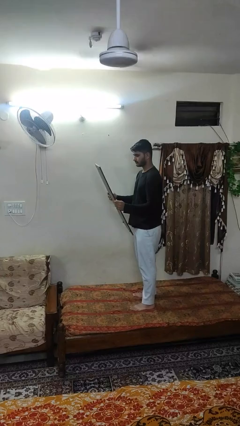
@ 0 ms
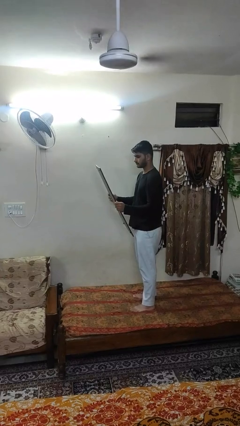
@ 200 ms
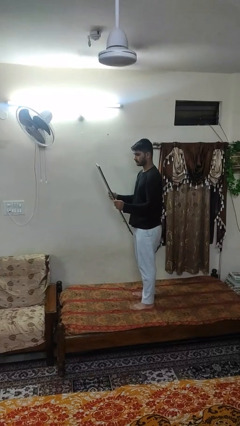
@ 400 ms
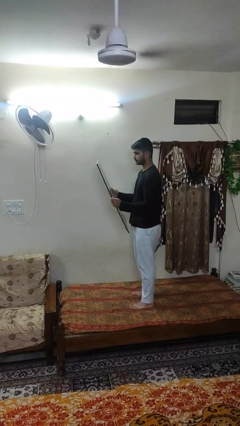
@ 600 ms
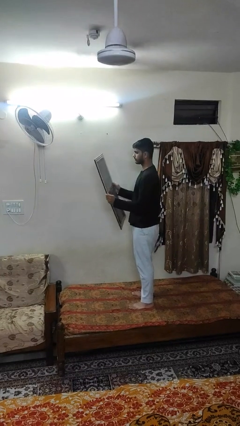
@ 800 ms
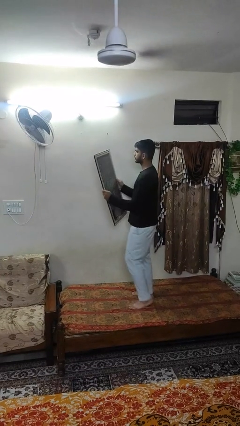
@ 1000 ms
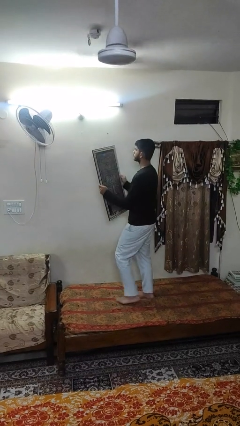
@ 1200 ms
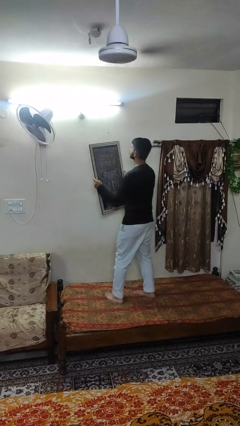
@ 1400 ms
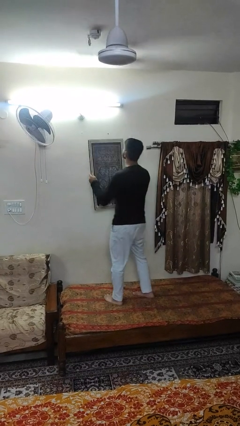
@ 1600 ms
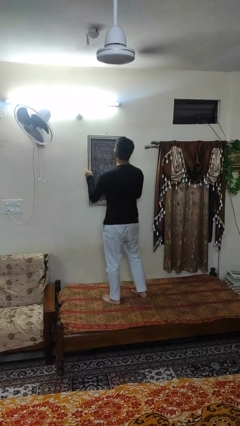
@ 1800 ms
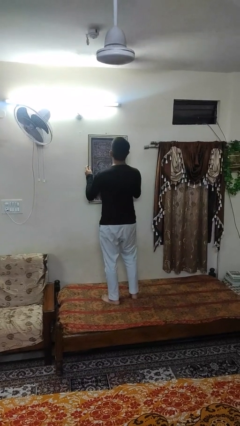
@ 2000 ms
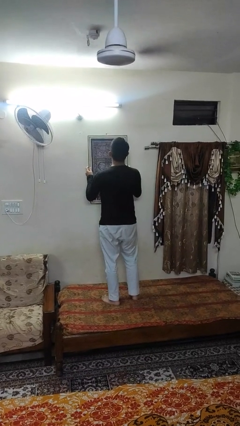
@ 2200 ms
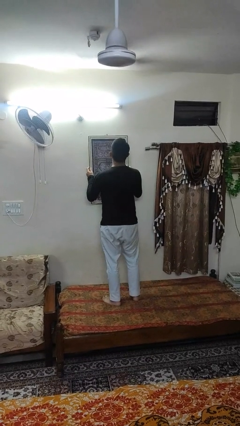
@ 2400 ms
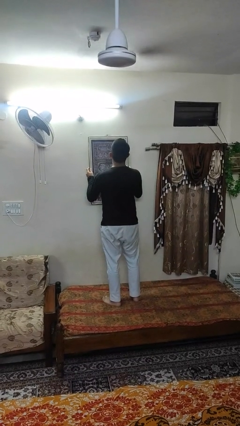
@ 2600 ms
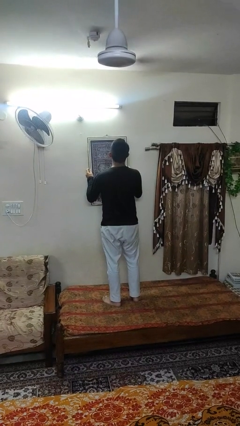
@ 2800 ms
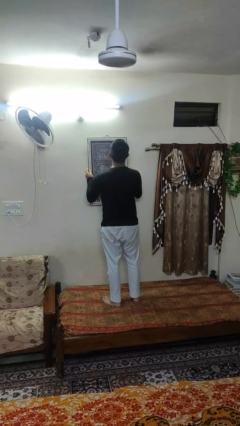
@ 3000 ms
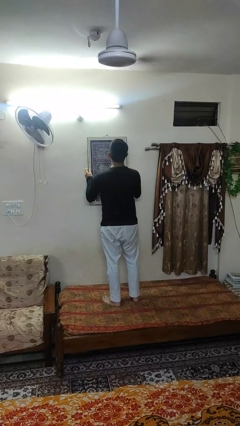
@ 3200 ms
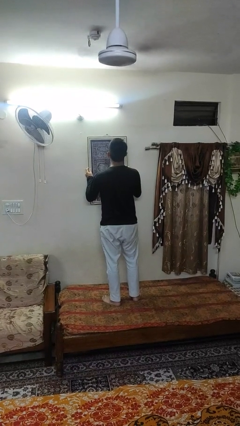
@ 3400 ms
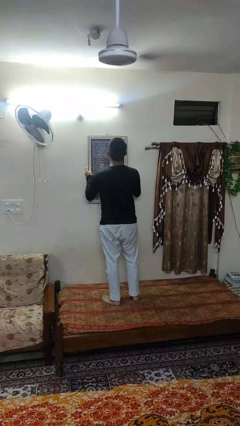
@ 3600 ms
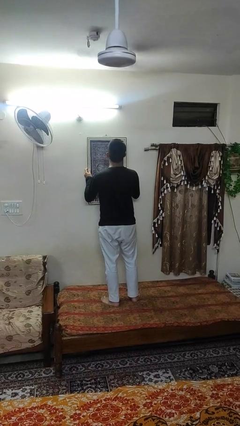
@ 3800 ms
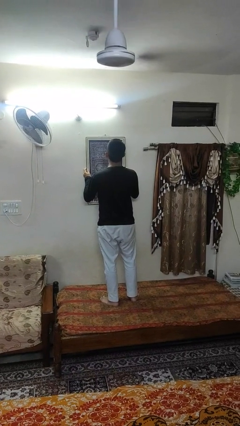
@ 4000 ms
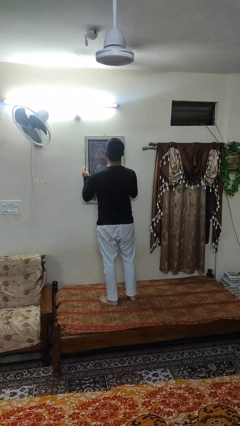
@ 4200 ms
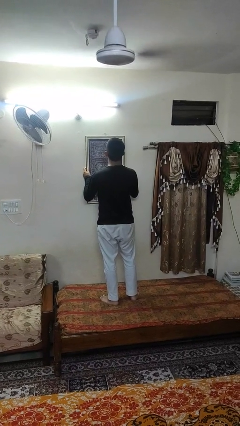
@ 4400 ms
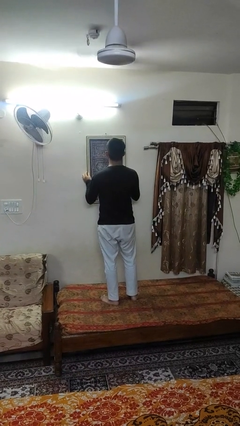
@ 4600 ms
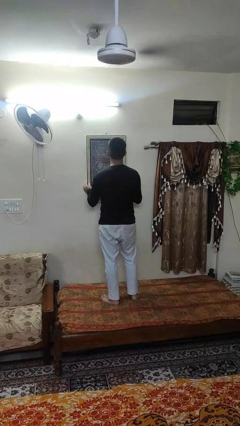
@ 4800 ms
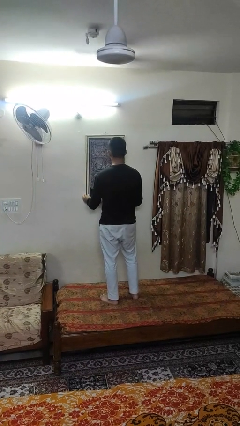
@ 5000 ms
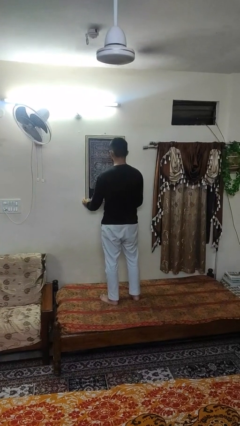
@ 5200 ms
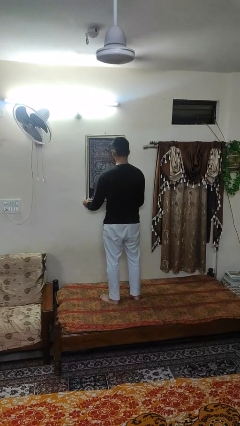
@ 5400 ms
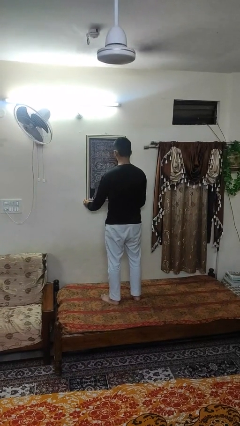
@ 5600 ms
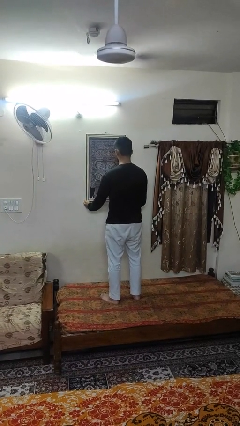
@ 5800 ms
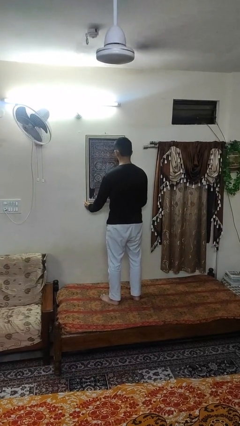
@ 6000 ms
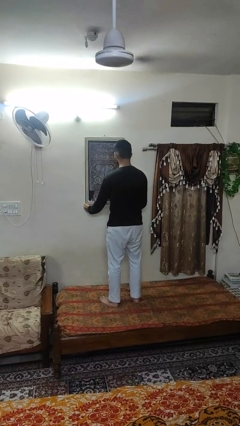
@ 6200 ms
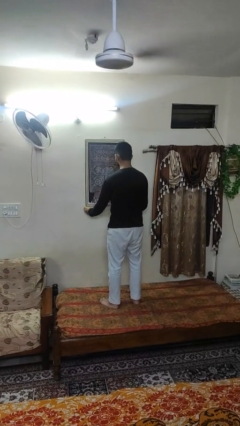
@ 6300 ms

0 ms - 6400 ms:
person puts up picture frame

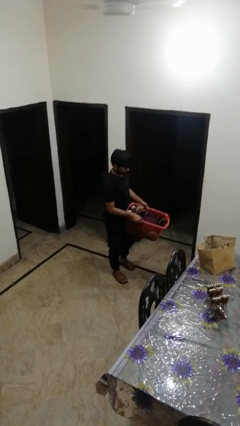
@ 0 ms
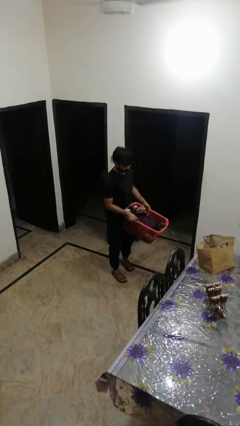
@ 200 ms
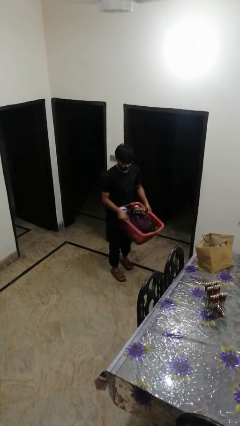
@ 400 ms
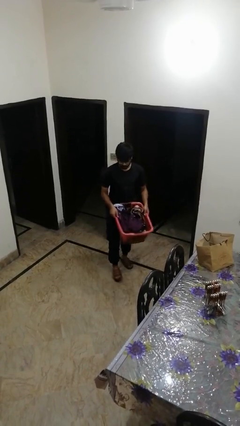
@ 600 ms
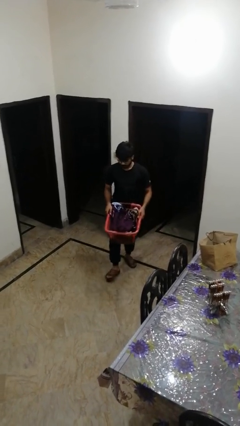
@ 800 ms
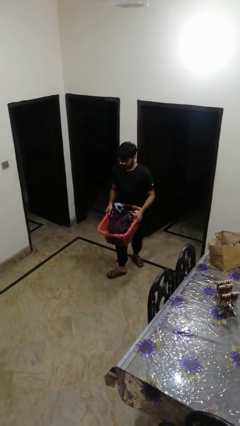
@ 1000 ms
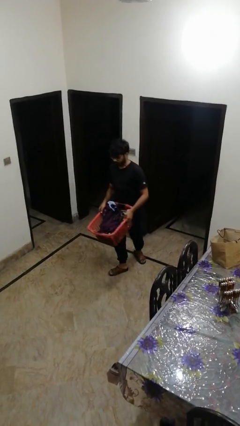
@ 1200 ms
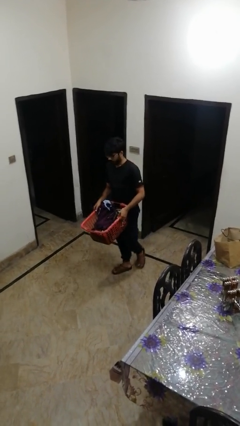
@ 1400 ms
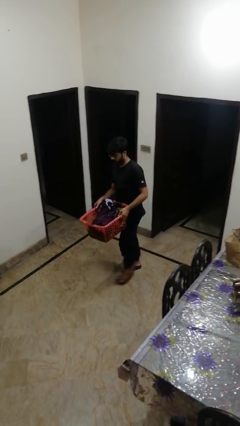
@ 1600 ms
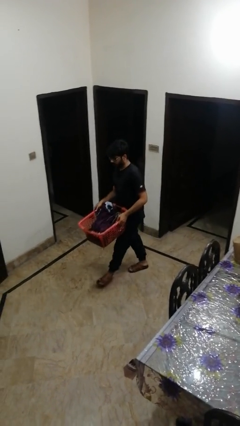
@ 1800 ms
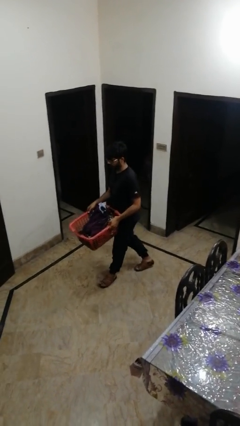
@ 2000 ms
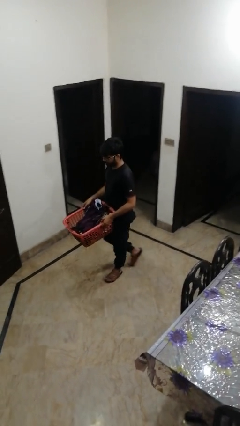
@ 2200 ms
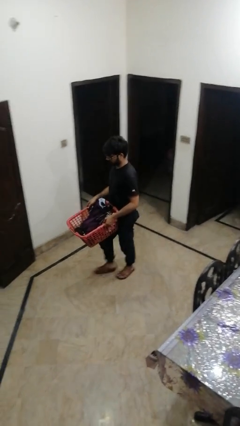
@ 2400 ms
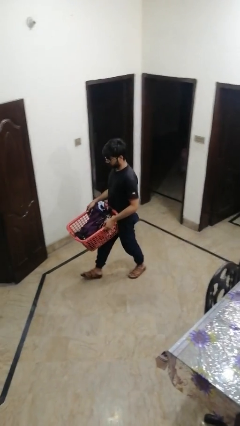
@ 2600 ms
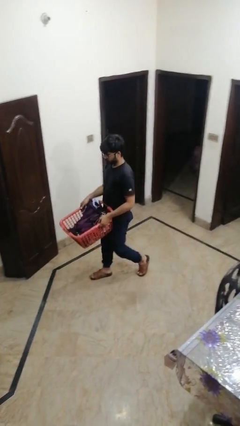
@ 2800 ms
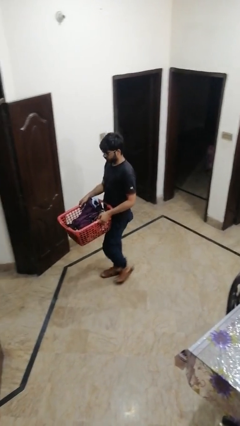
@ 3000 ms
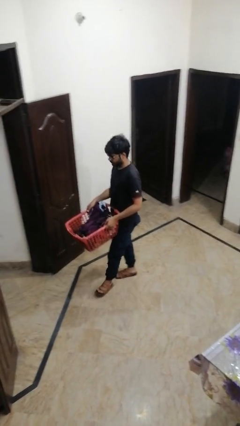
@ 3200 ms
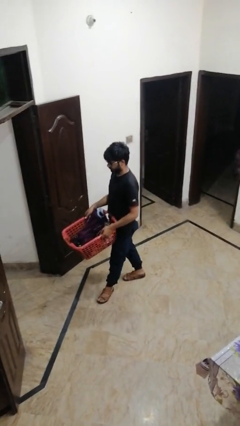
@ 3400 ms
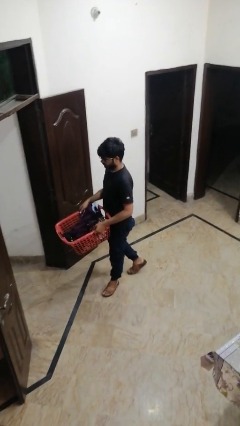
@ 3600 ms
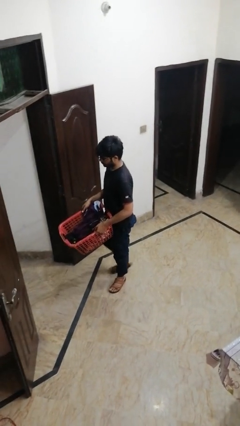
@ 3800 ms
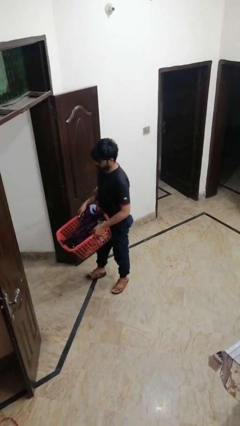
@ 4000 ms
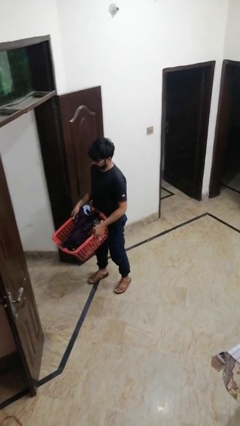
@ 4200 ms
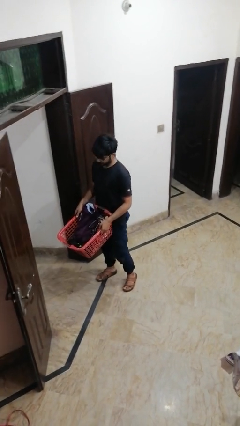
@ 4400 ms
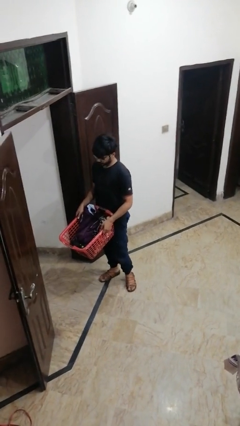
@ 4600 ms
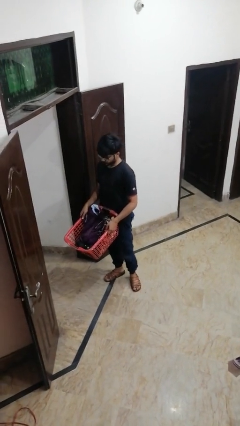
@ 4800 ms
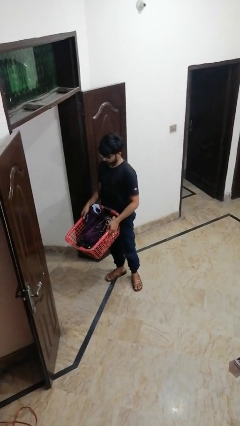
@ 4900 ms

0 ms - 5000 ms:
person carries laundry basket

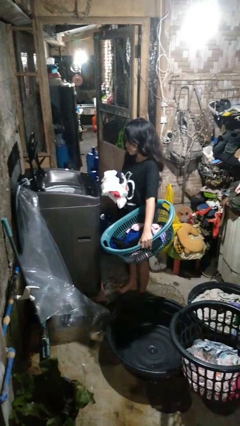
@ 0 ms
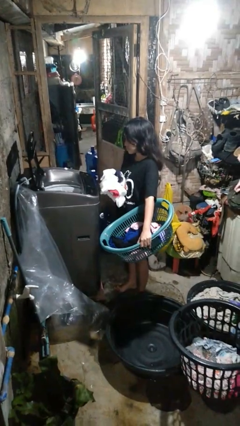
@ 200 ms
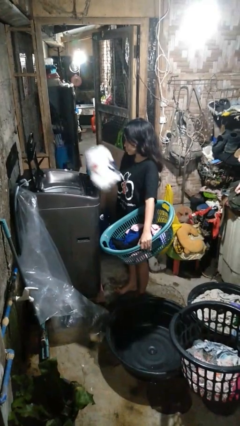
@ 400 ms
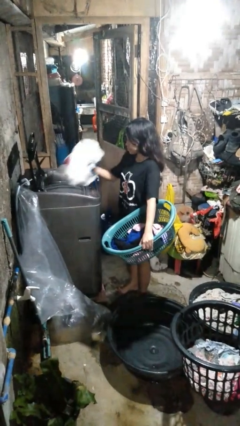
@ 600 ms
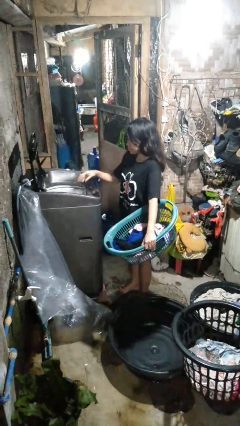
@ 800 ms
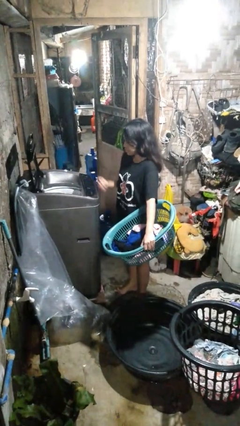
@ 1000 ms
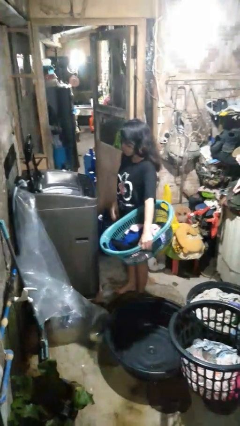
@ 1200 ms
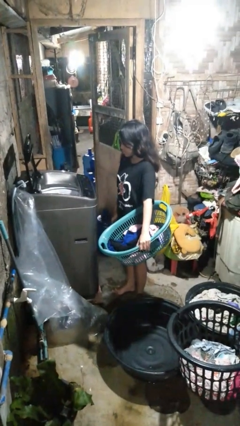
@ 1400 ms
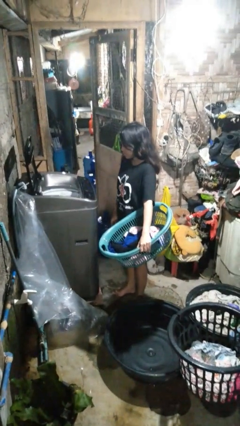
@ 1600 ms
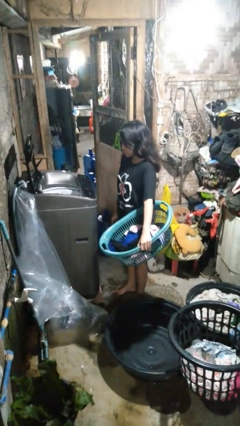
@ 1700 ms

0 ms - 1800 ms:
person loads clotheswasher

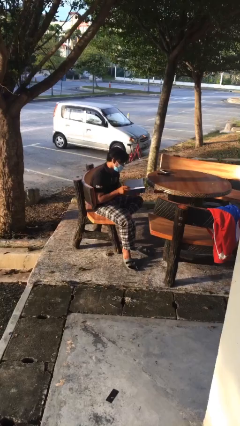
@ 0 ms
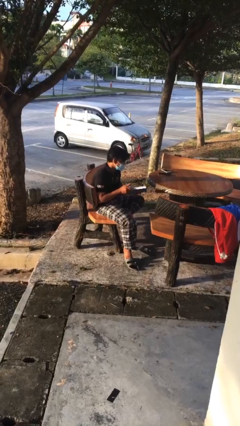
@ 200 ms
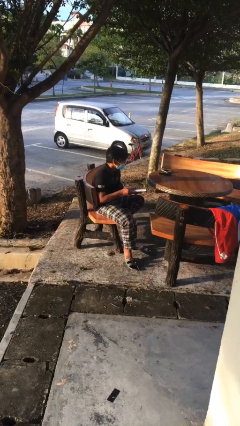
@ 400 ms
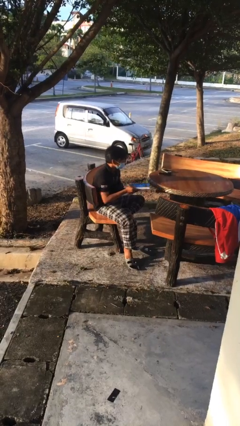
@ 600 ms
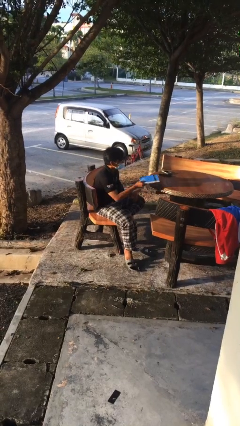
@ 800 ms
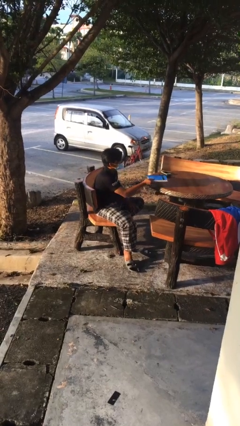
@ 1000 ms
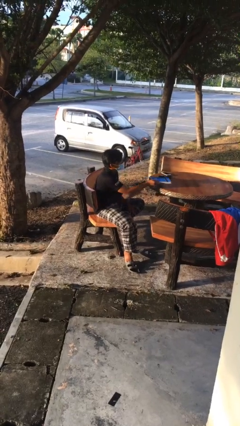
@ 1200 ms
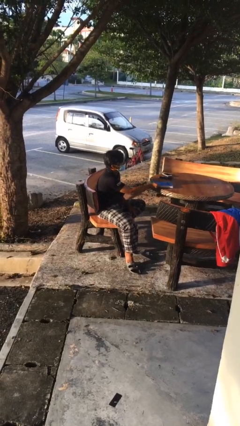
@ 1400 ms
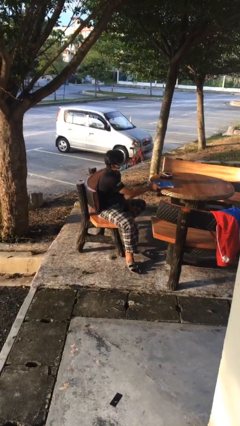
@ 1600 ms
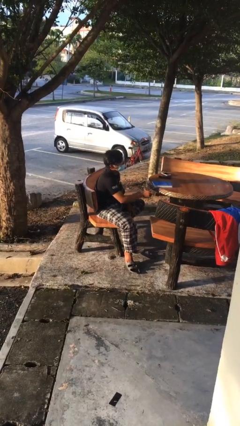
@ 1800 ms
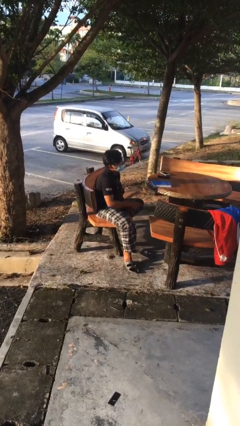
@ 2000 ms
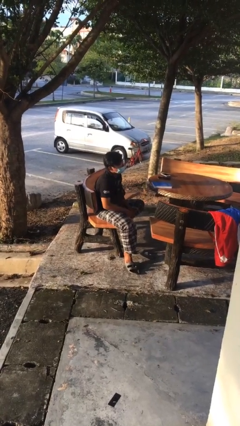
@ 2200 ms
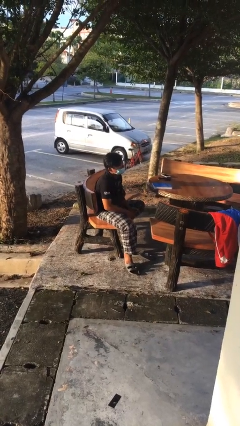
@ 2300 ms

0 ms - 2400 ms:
person puts down object on table

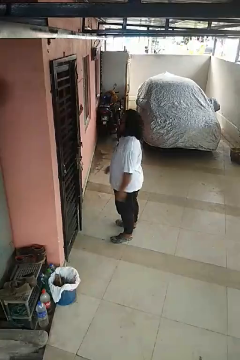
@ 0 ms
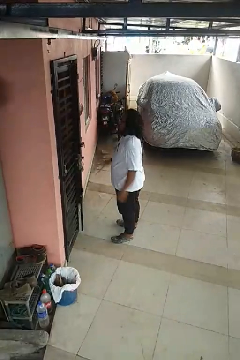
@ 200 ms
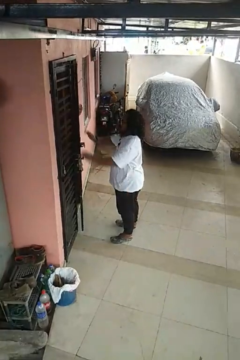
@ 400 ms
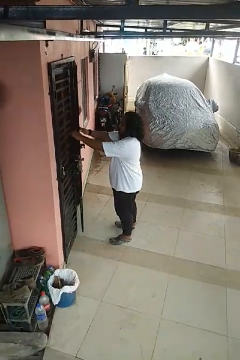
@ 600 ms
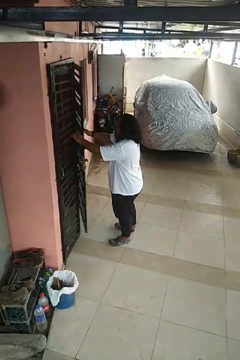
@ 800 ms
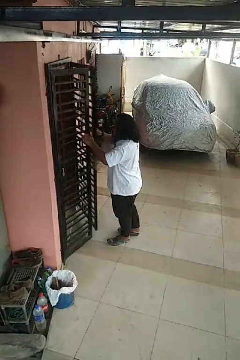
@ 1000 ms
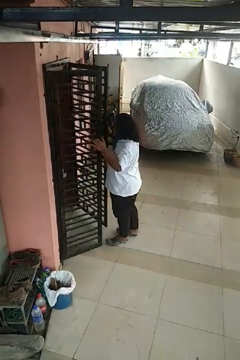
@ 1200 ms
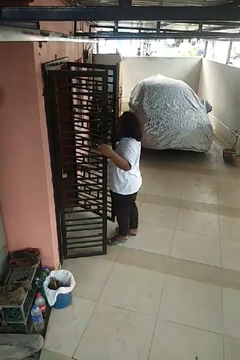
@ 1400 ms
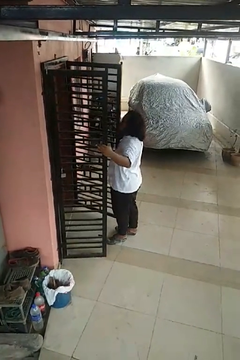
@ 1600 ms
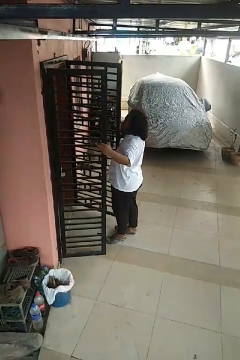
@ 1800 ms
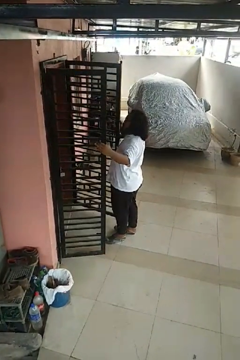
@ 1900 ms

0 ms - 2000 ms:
person opens gate

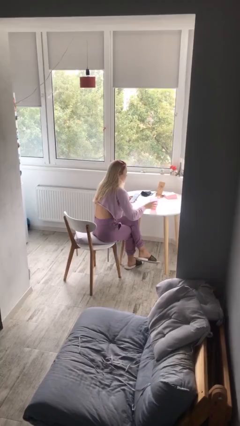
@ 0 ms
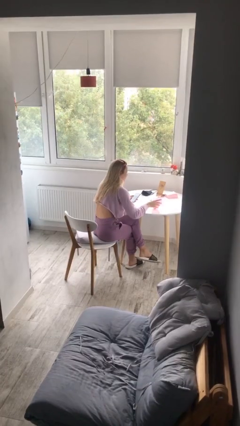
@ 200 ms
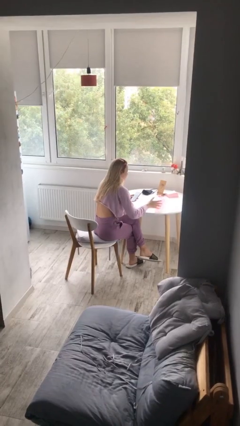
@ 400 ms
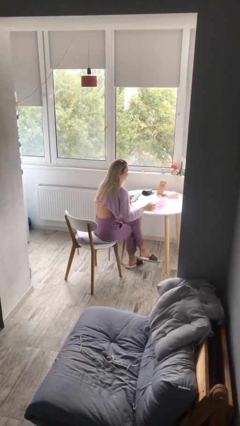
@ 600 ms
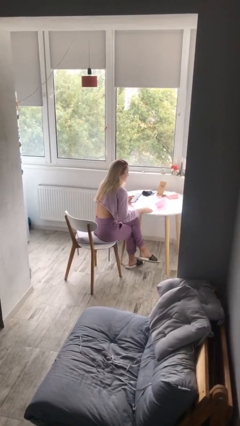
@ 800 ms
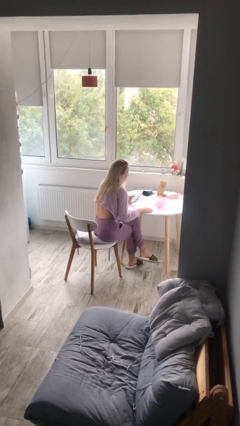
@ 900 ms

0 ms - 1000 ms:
person knocks over glass
